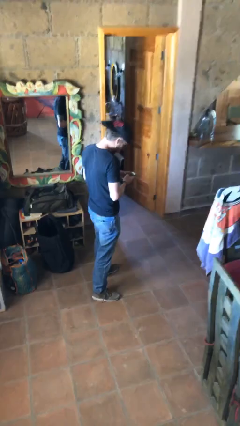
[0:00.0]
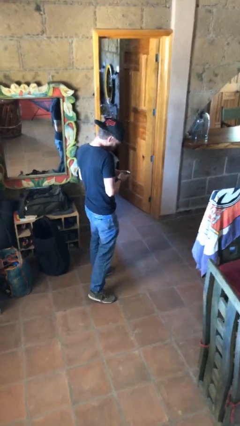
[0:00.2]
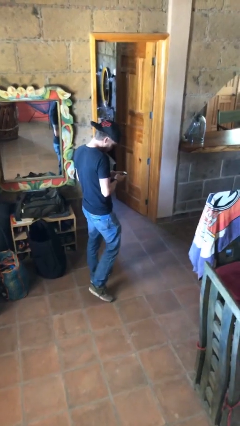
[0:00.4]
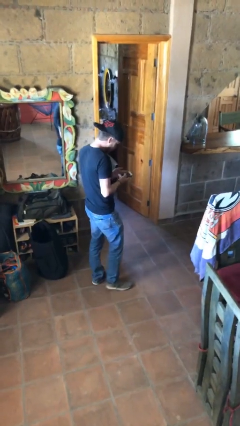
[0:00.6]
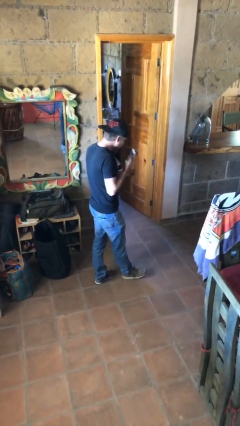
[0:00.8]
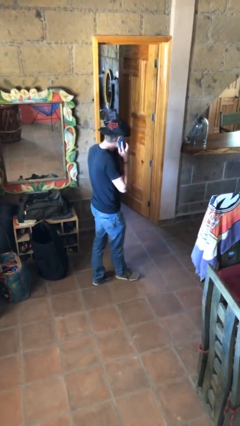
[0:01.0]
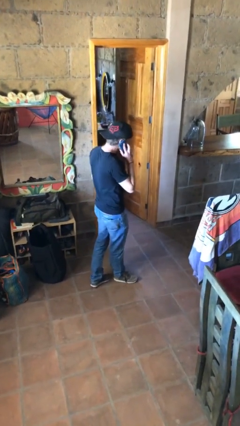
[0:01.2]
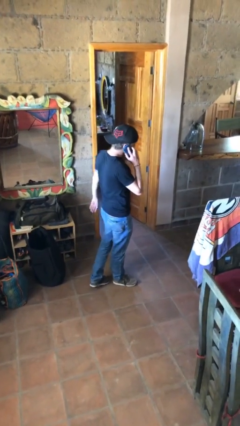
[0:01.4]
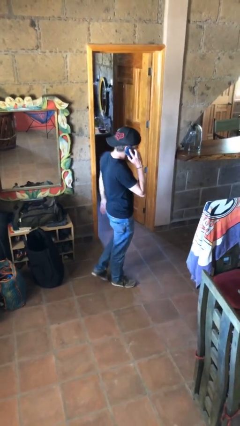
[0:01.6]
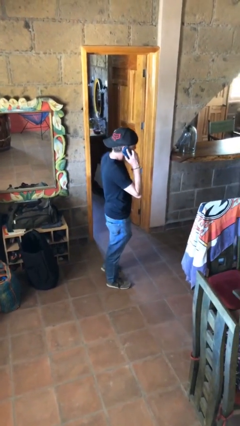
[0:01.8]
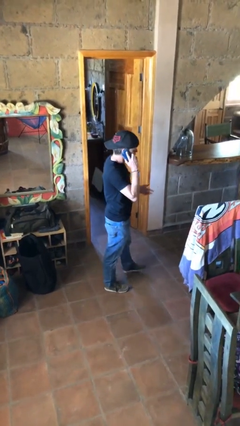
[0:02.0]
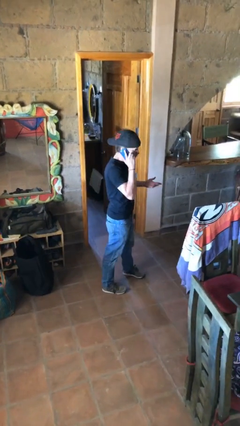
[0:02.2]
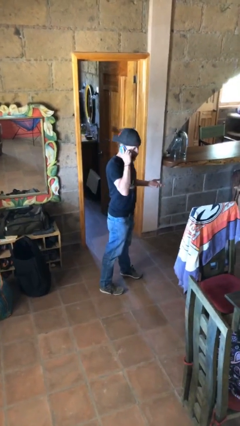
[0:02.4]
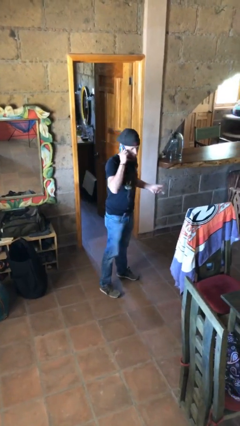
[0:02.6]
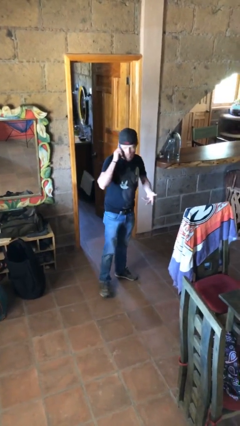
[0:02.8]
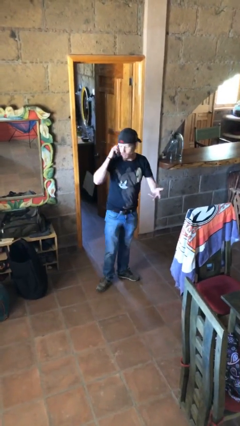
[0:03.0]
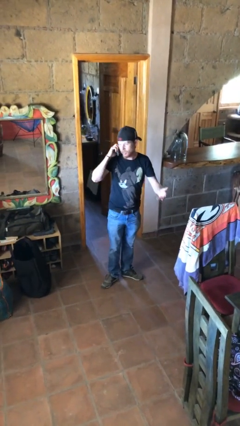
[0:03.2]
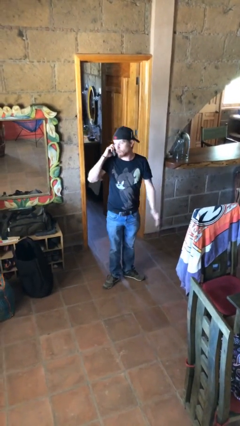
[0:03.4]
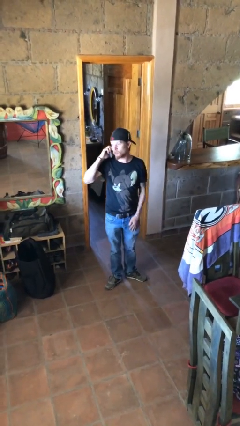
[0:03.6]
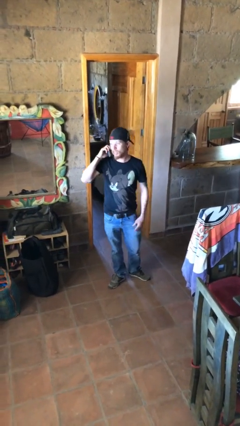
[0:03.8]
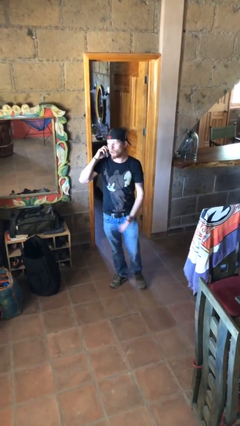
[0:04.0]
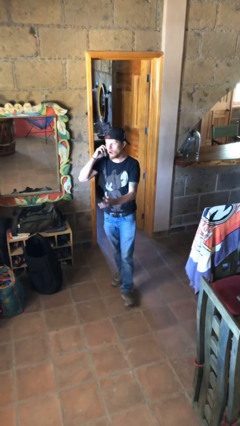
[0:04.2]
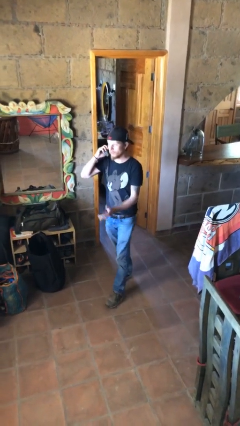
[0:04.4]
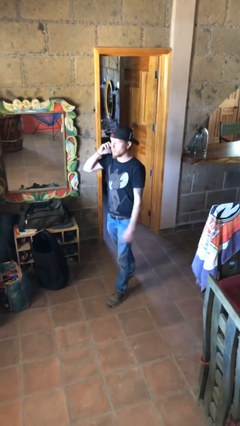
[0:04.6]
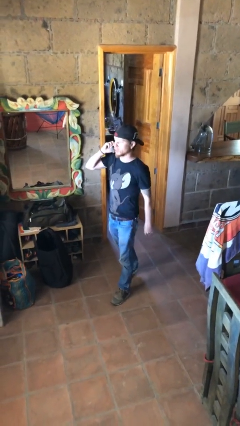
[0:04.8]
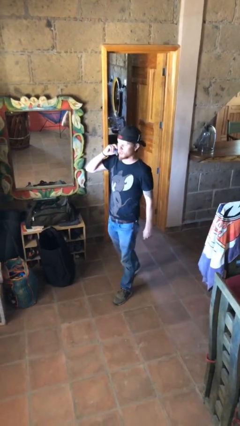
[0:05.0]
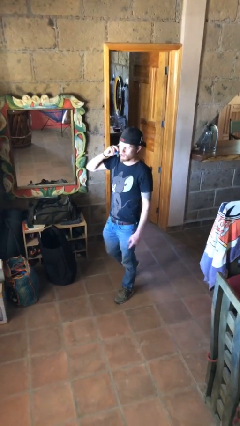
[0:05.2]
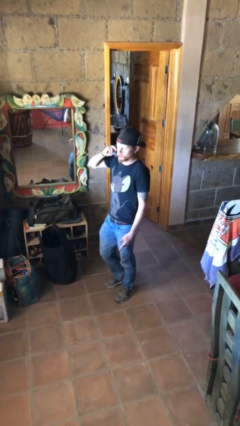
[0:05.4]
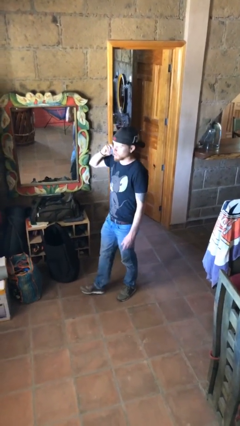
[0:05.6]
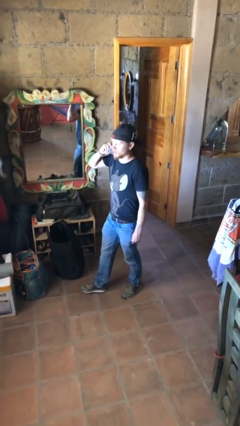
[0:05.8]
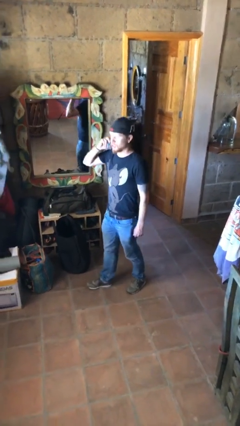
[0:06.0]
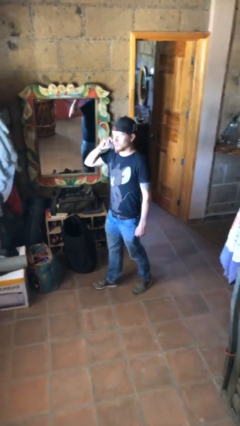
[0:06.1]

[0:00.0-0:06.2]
person talks on phone

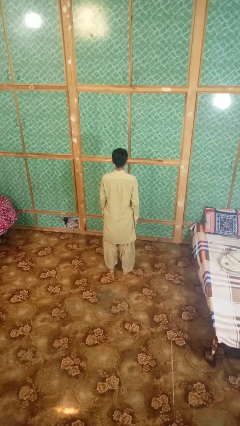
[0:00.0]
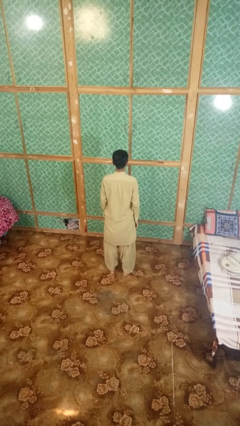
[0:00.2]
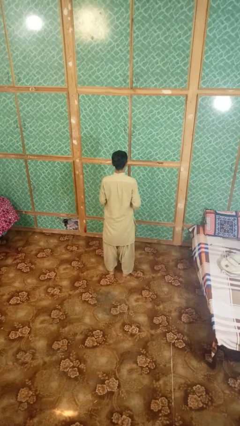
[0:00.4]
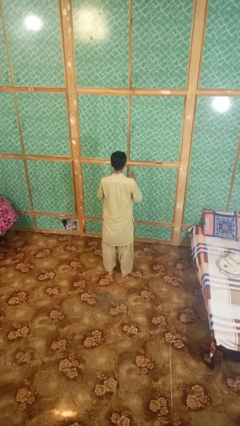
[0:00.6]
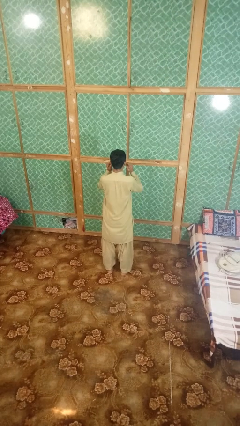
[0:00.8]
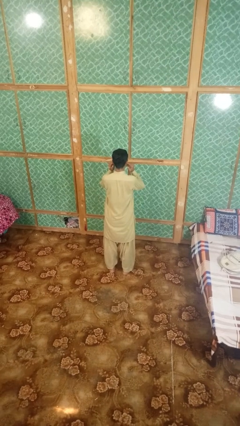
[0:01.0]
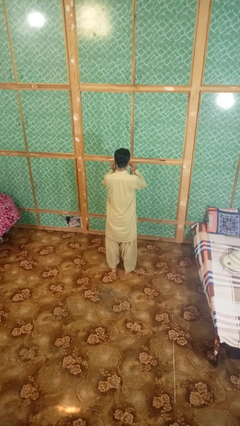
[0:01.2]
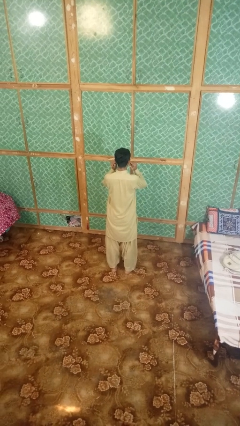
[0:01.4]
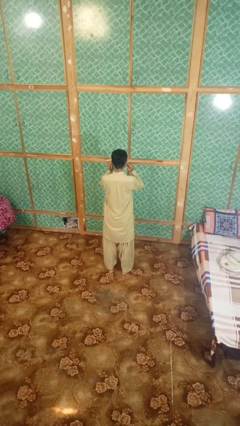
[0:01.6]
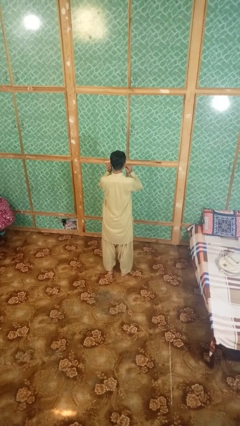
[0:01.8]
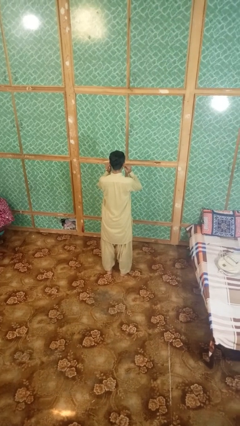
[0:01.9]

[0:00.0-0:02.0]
person puts fingers in ear

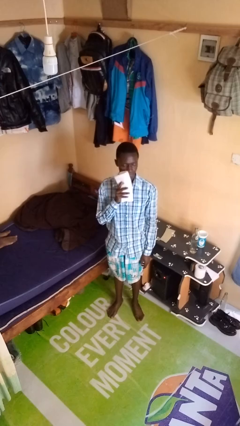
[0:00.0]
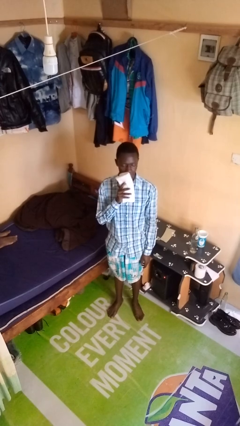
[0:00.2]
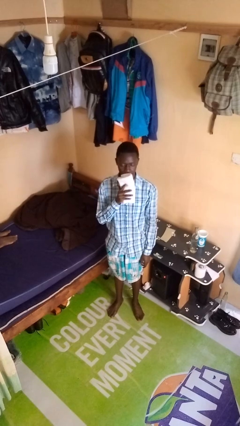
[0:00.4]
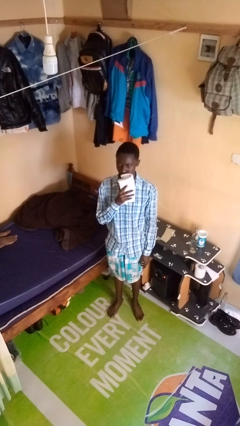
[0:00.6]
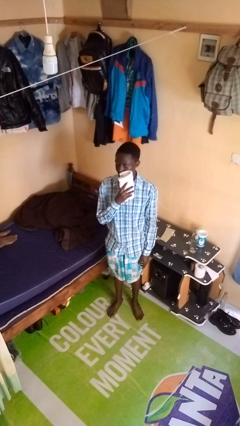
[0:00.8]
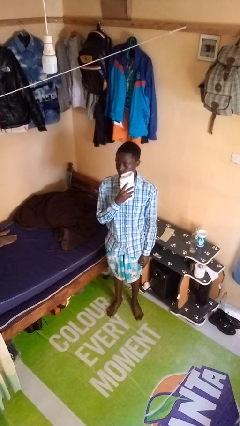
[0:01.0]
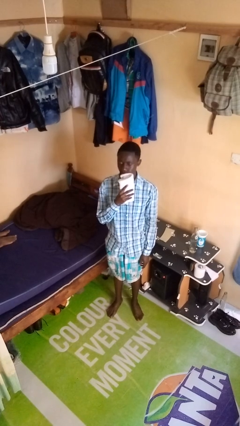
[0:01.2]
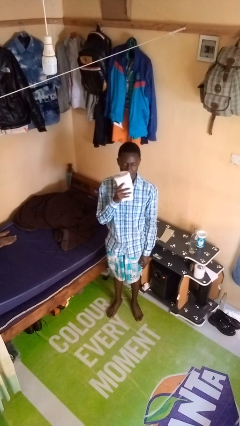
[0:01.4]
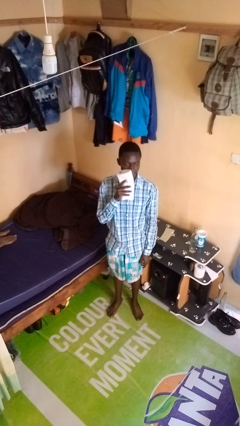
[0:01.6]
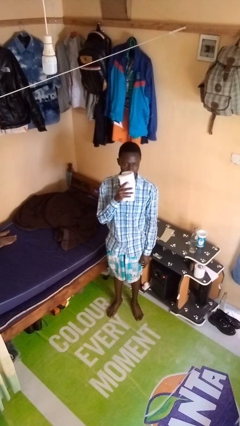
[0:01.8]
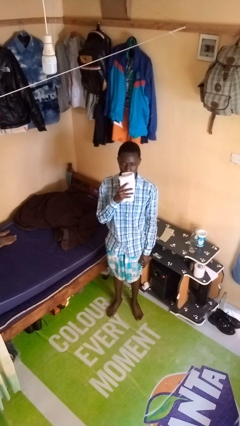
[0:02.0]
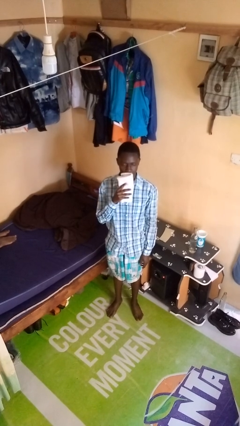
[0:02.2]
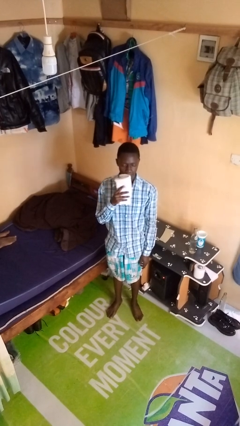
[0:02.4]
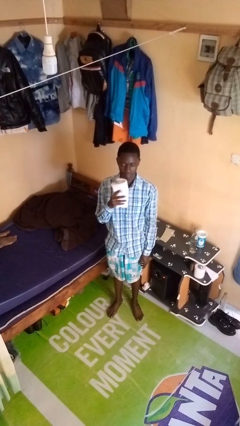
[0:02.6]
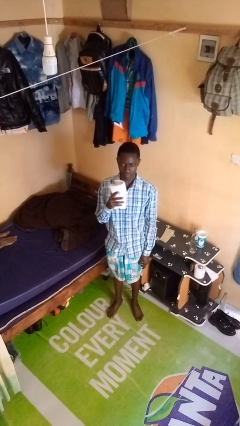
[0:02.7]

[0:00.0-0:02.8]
person wipes mouth with napkin

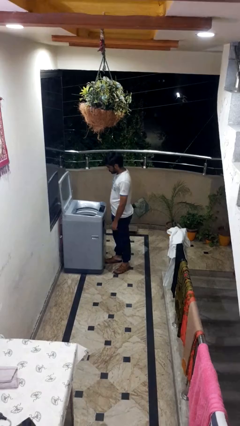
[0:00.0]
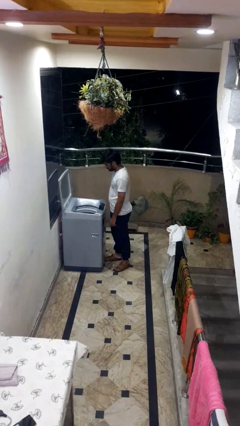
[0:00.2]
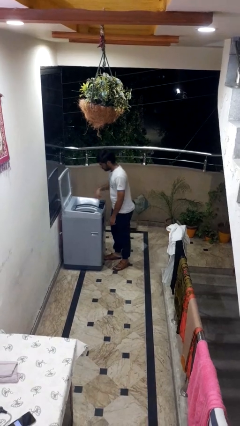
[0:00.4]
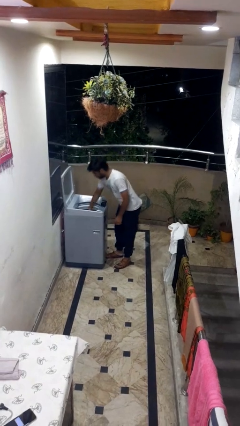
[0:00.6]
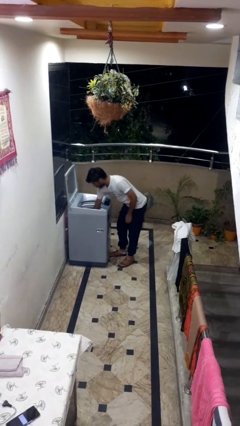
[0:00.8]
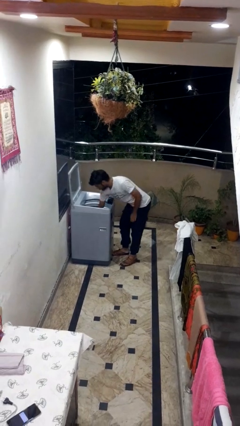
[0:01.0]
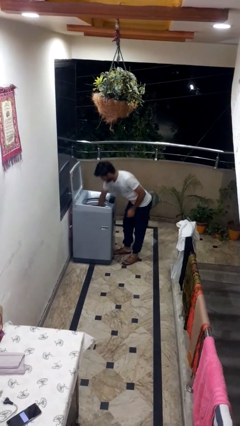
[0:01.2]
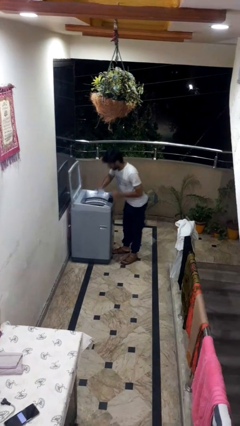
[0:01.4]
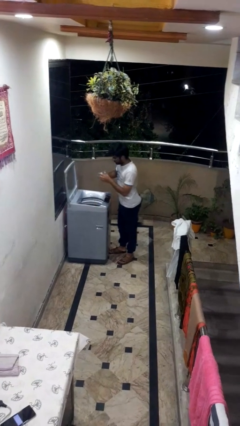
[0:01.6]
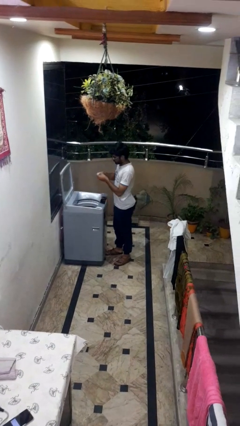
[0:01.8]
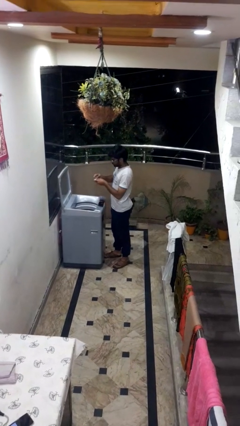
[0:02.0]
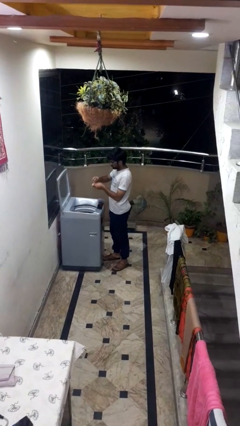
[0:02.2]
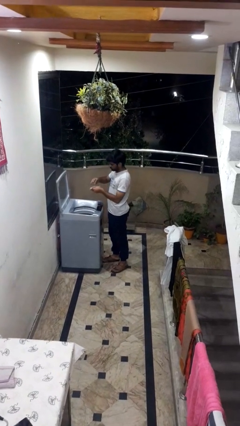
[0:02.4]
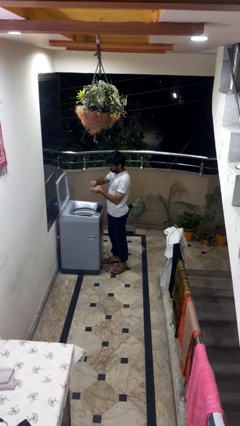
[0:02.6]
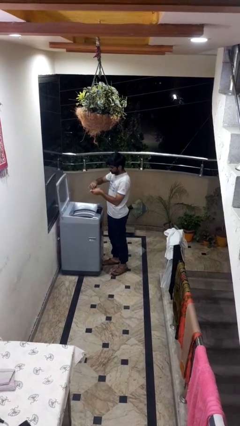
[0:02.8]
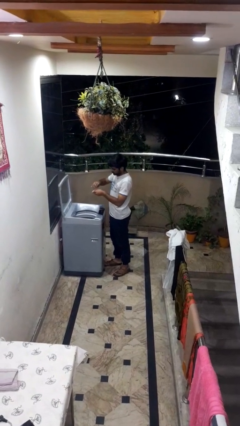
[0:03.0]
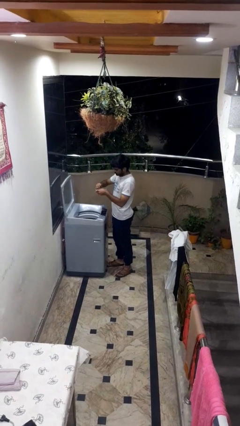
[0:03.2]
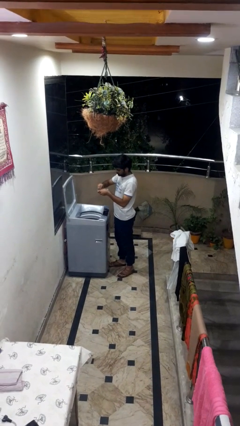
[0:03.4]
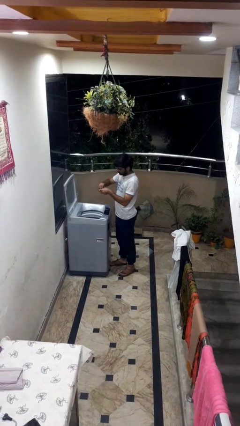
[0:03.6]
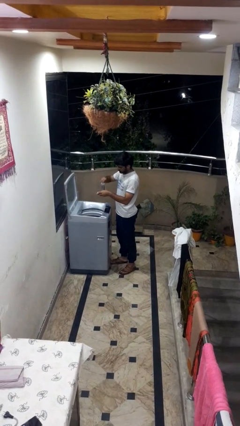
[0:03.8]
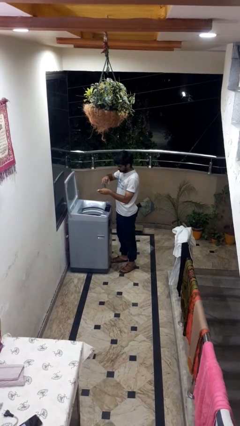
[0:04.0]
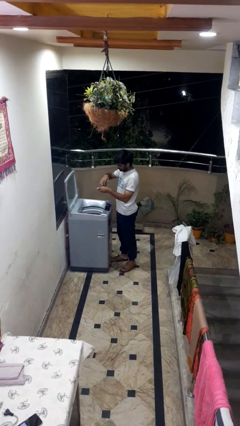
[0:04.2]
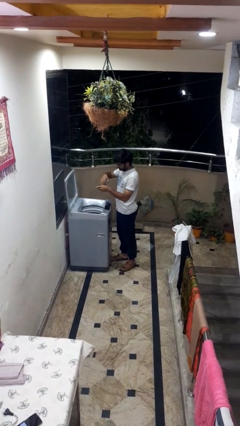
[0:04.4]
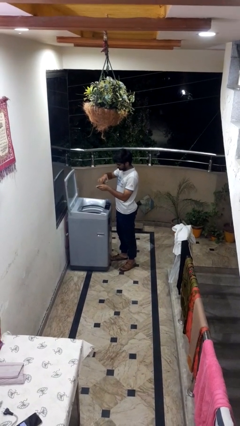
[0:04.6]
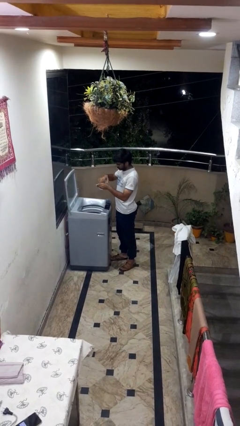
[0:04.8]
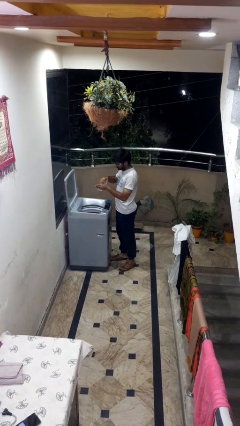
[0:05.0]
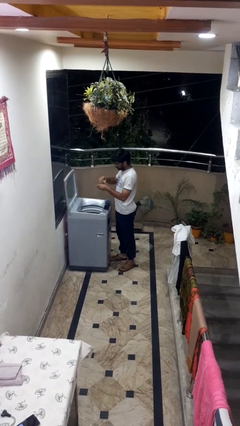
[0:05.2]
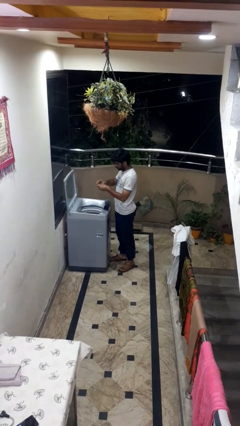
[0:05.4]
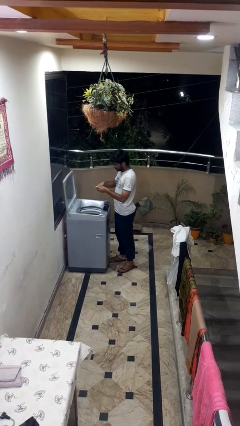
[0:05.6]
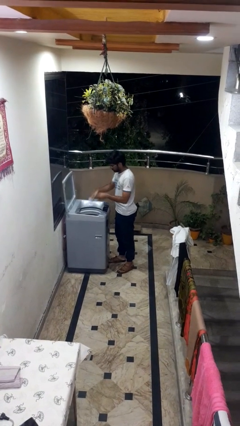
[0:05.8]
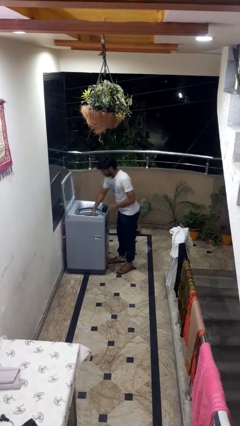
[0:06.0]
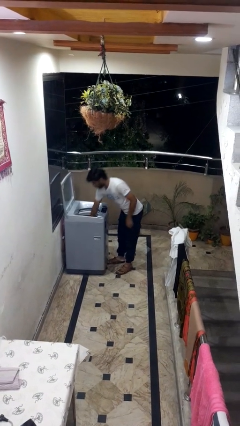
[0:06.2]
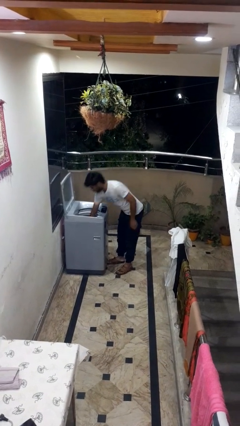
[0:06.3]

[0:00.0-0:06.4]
person cleans dryer lint trap
